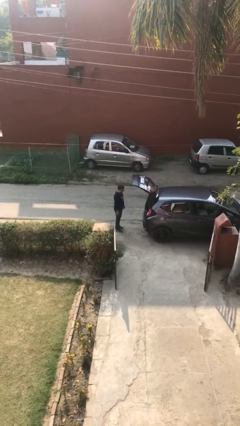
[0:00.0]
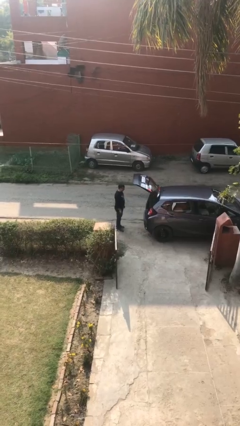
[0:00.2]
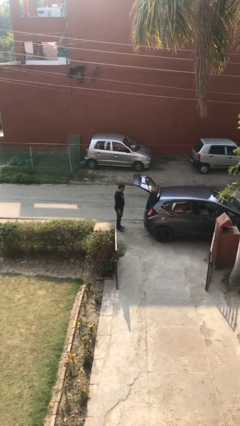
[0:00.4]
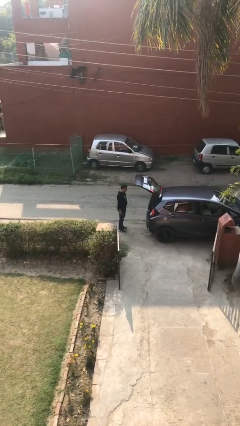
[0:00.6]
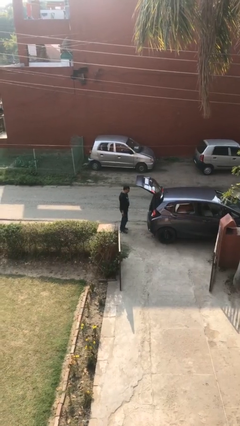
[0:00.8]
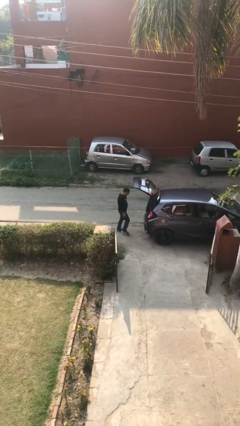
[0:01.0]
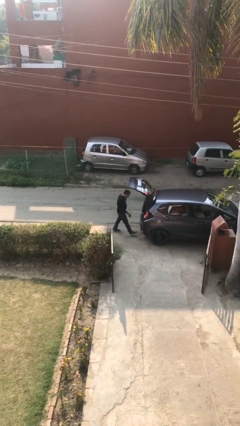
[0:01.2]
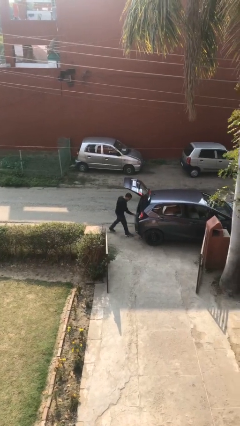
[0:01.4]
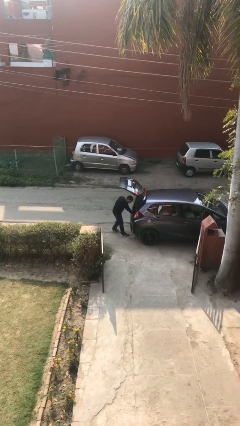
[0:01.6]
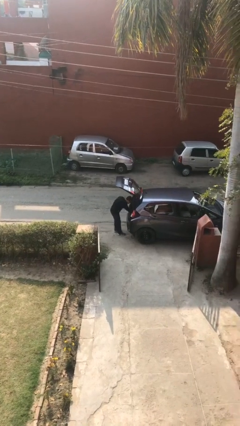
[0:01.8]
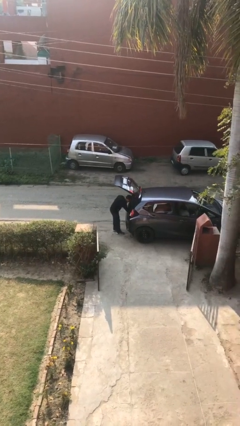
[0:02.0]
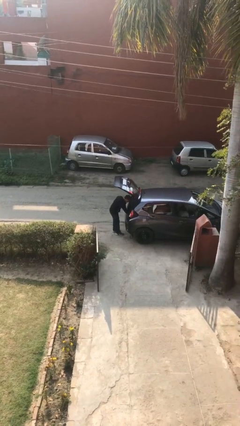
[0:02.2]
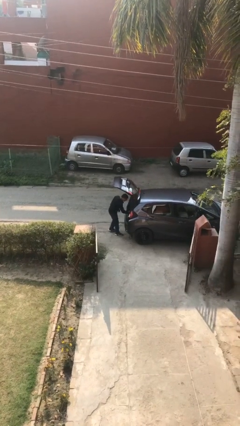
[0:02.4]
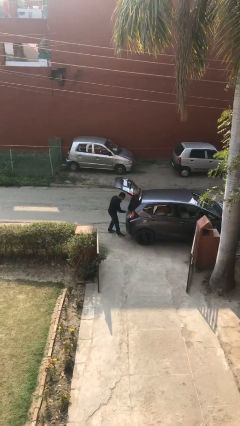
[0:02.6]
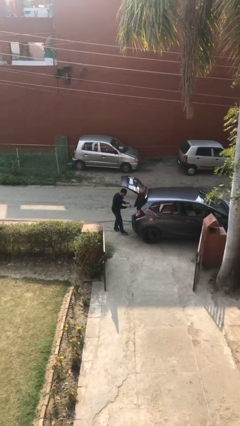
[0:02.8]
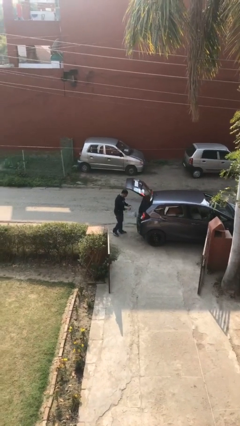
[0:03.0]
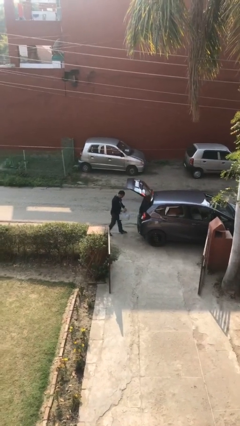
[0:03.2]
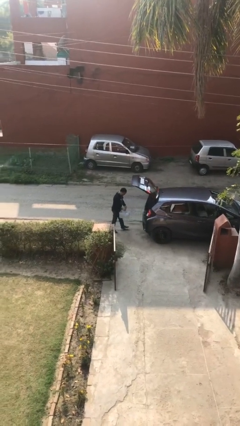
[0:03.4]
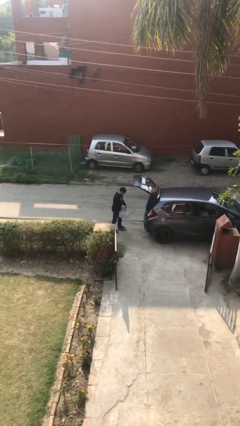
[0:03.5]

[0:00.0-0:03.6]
person unloads car

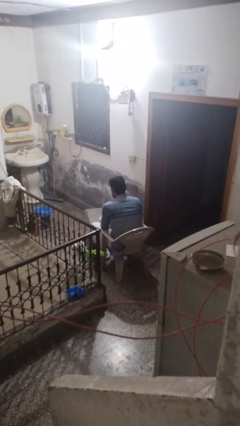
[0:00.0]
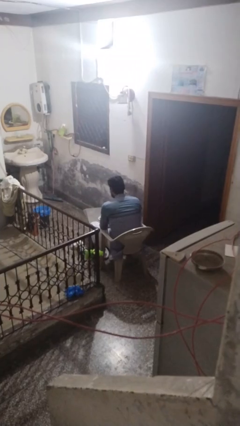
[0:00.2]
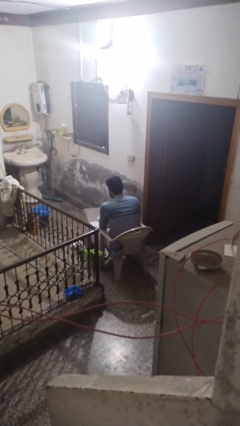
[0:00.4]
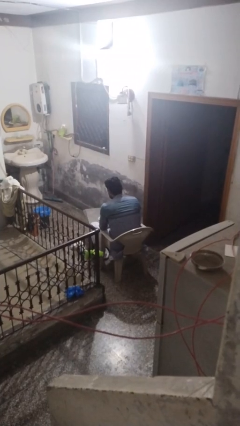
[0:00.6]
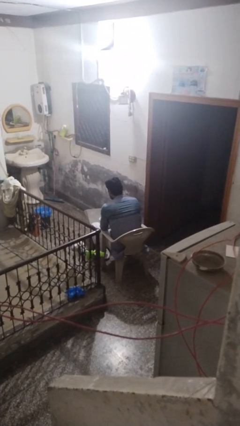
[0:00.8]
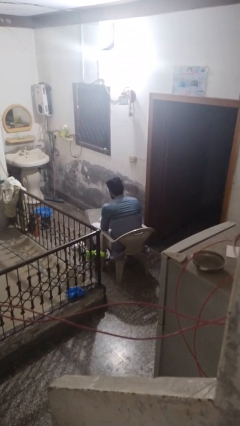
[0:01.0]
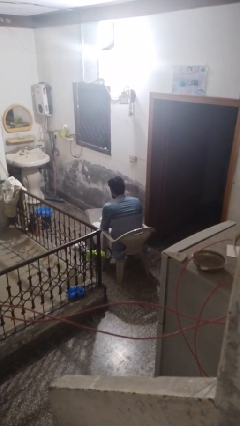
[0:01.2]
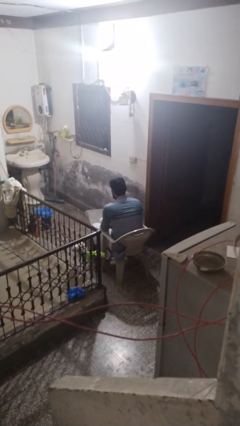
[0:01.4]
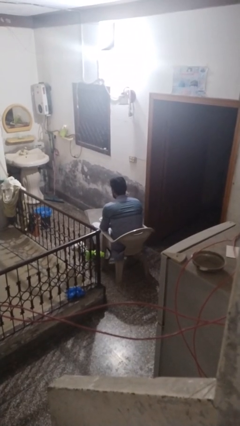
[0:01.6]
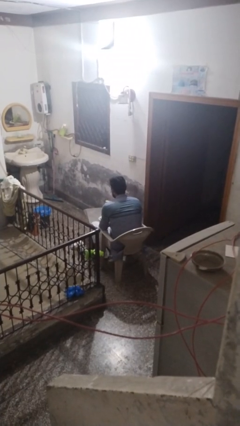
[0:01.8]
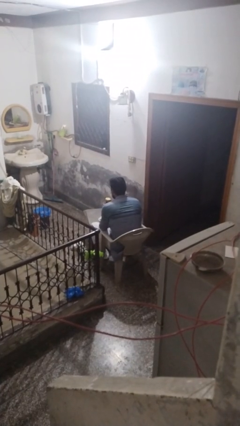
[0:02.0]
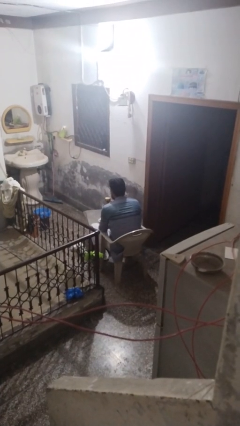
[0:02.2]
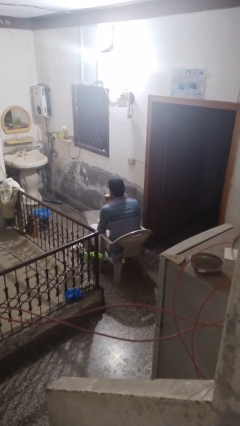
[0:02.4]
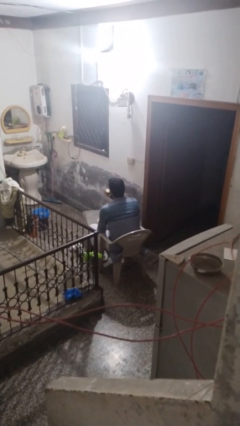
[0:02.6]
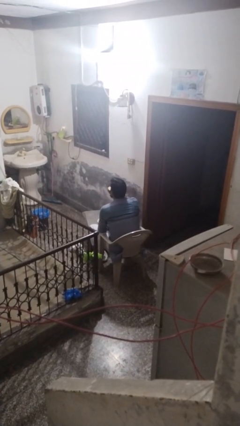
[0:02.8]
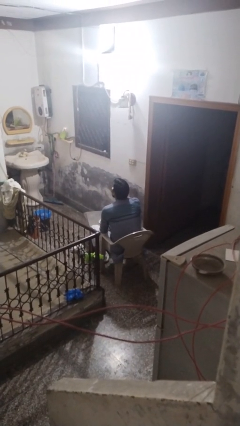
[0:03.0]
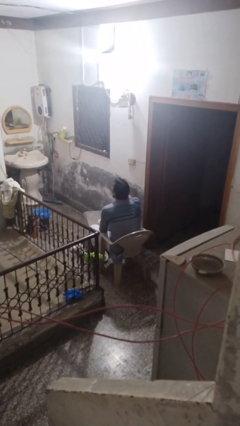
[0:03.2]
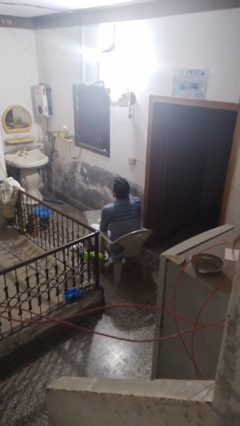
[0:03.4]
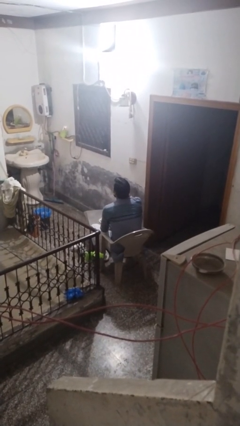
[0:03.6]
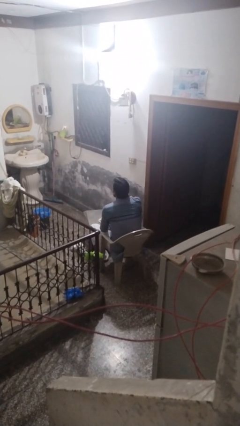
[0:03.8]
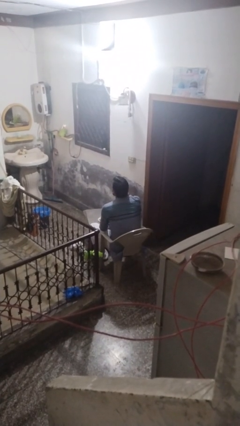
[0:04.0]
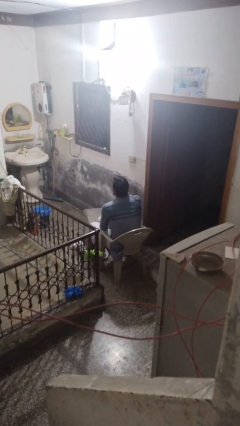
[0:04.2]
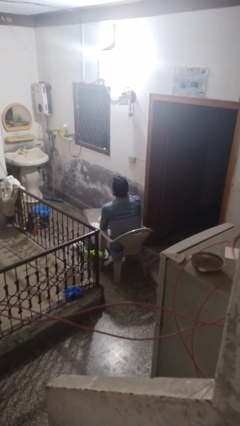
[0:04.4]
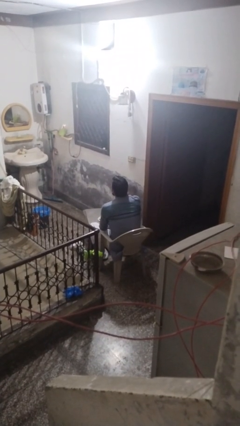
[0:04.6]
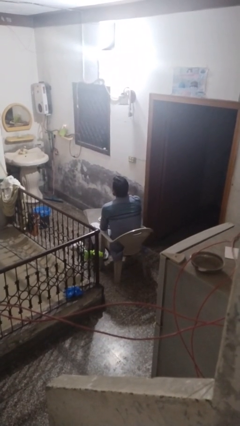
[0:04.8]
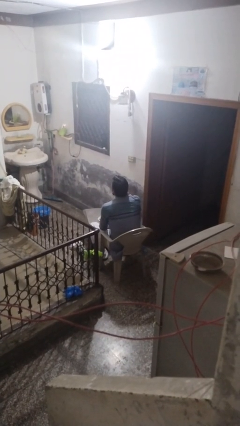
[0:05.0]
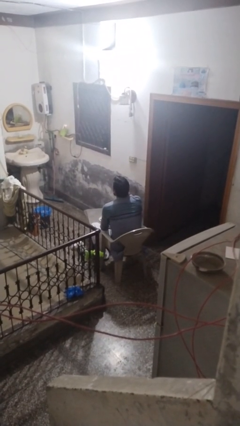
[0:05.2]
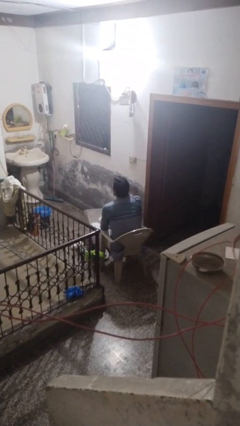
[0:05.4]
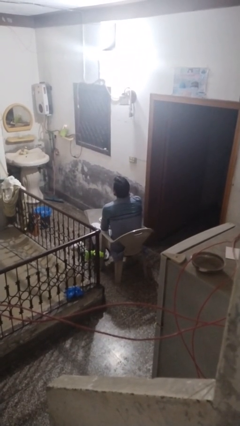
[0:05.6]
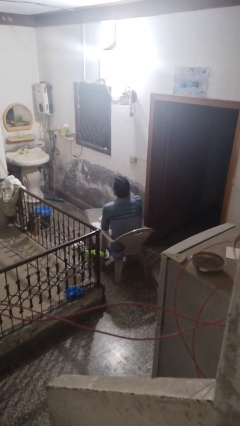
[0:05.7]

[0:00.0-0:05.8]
person eats with hands

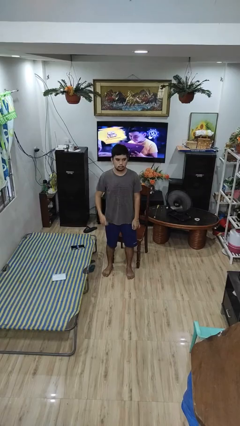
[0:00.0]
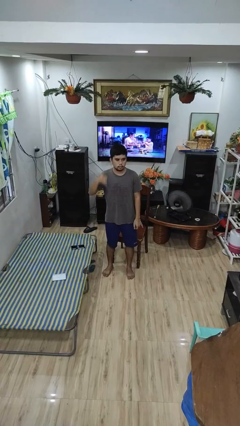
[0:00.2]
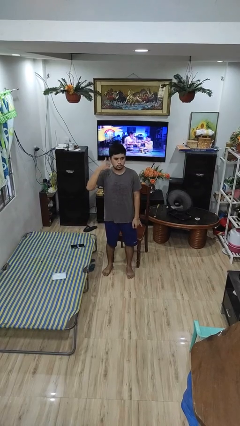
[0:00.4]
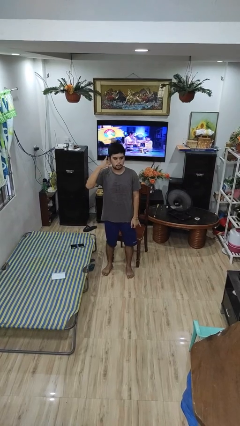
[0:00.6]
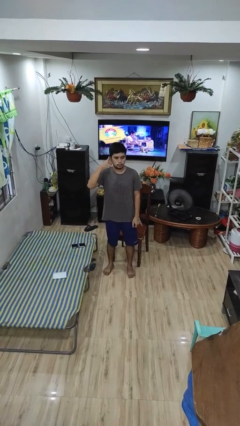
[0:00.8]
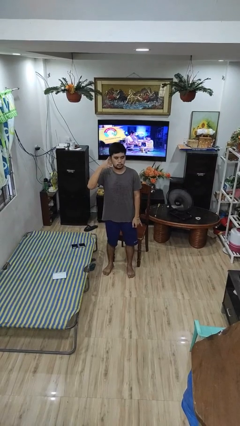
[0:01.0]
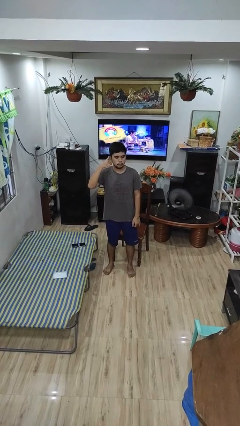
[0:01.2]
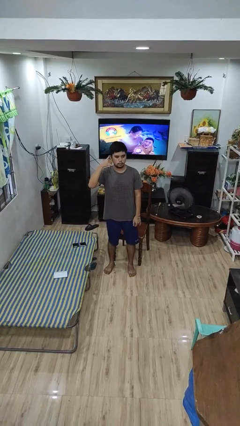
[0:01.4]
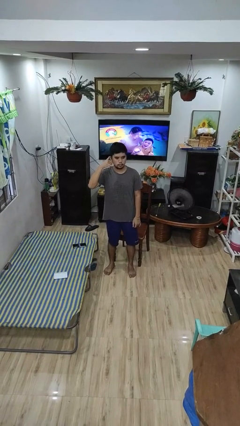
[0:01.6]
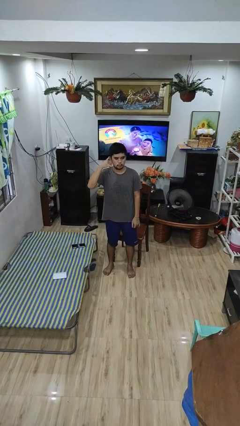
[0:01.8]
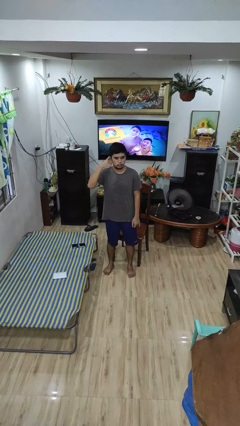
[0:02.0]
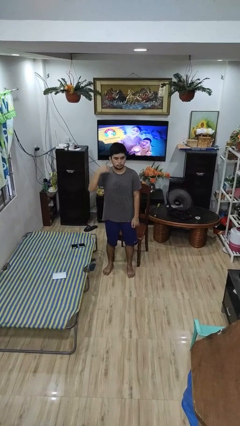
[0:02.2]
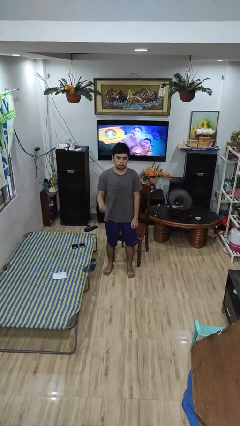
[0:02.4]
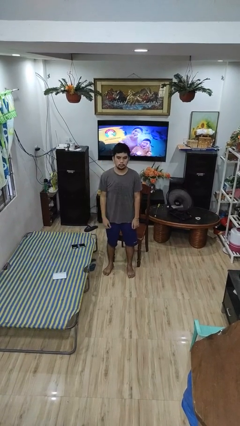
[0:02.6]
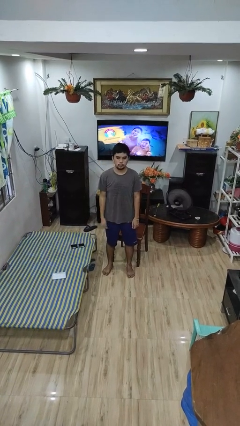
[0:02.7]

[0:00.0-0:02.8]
person gestures call me

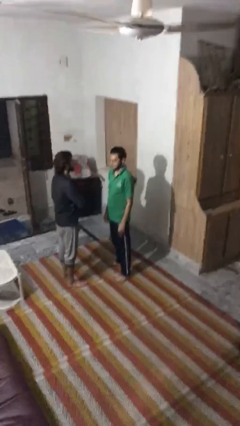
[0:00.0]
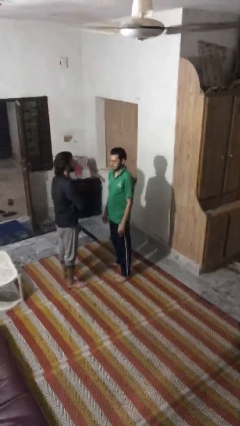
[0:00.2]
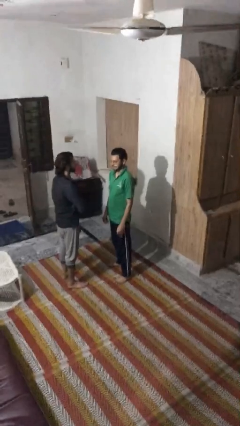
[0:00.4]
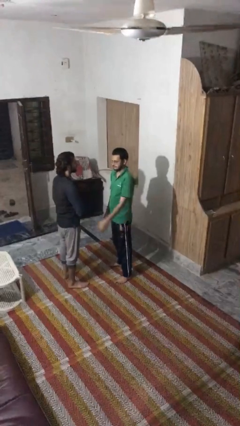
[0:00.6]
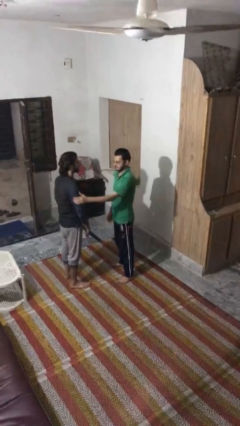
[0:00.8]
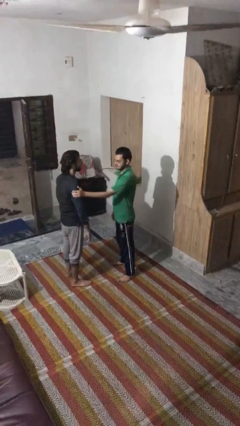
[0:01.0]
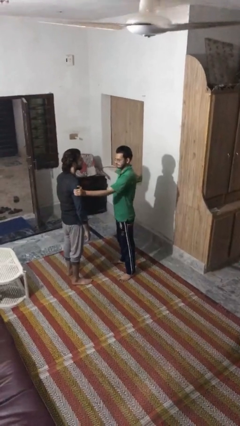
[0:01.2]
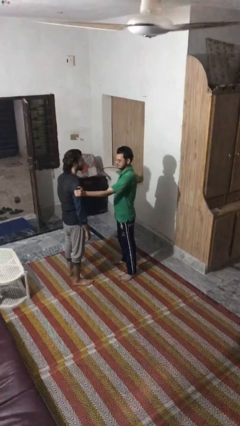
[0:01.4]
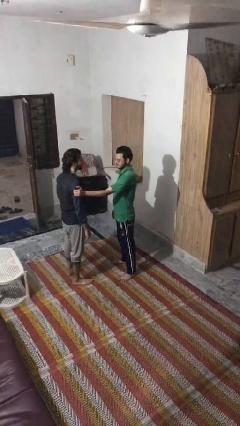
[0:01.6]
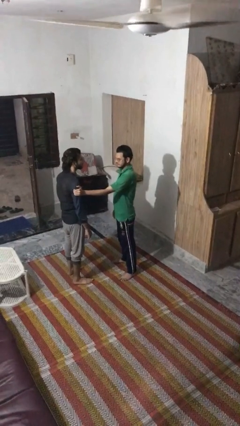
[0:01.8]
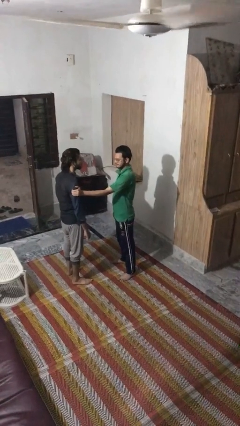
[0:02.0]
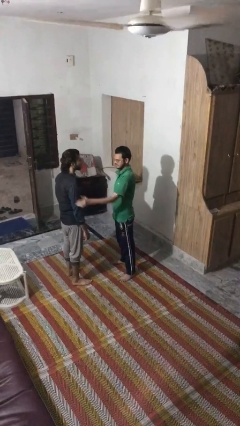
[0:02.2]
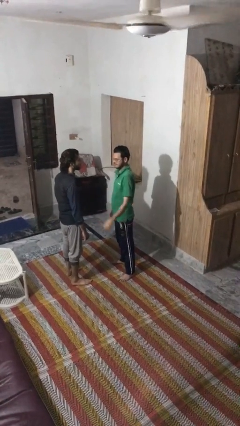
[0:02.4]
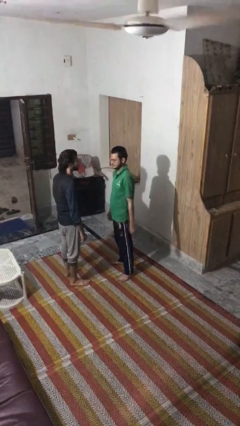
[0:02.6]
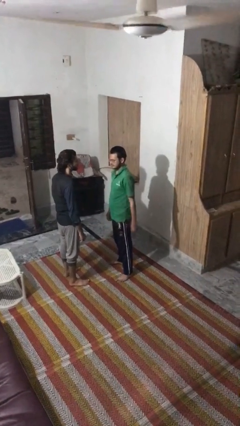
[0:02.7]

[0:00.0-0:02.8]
person grabs person by bicep

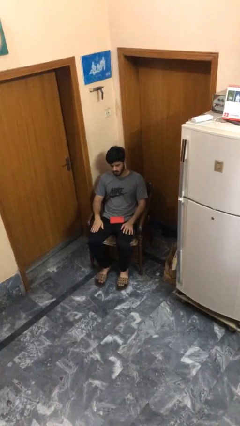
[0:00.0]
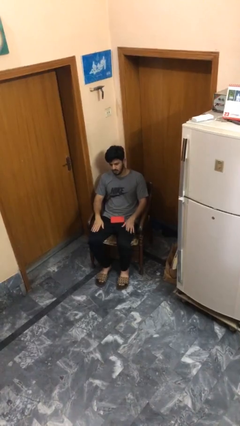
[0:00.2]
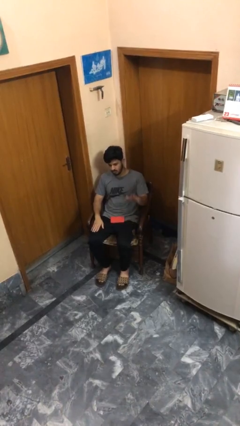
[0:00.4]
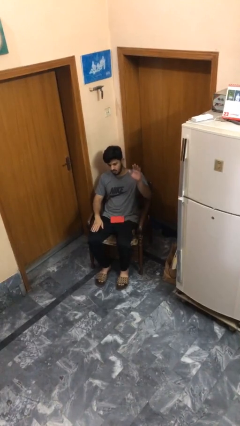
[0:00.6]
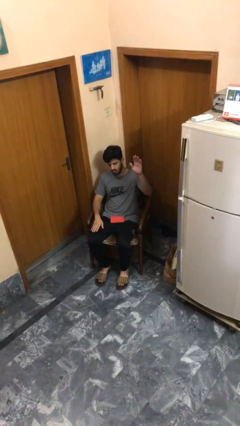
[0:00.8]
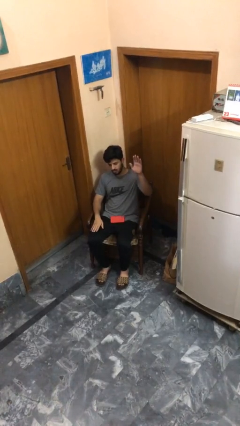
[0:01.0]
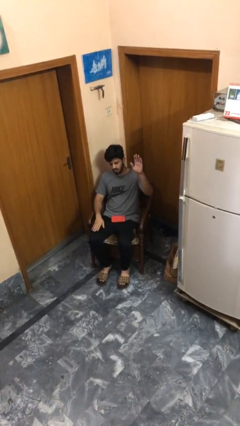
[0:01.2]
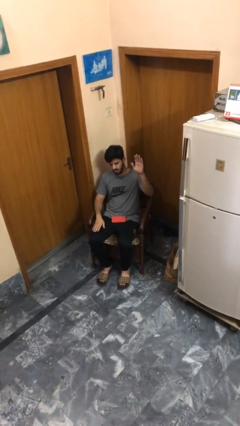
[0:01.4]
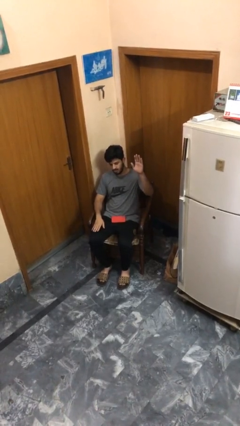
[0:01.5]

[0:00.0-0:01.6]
person gestures raise hand

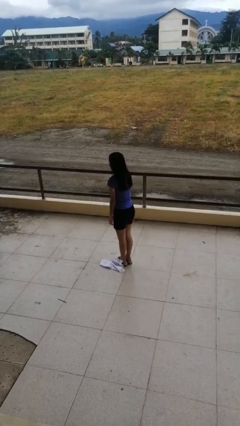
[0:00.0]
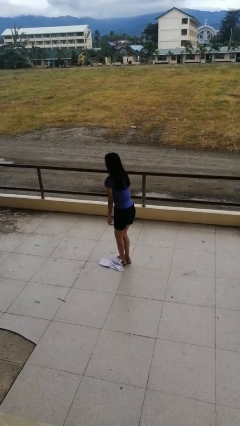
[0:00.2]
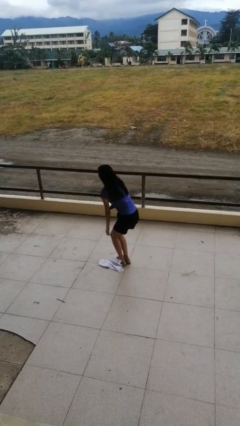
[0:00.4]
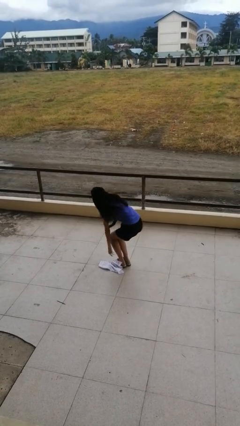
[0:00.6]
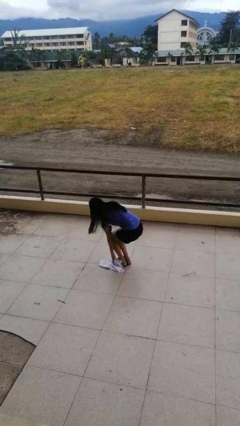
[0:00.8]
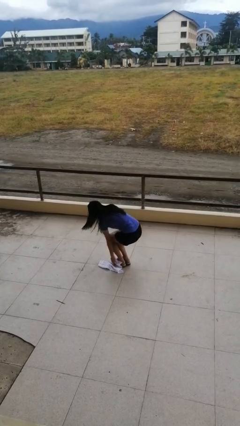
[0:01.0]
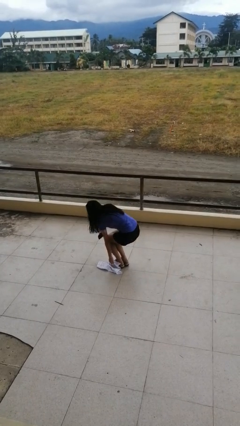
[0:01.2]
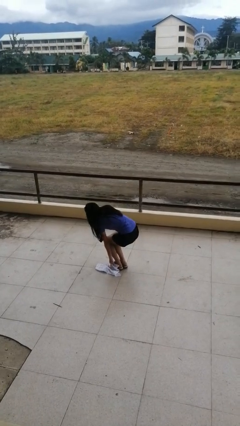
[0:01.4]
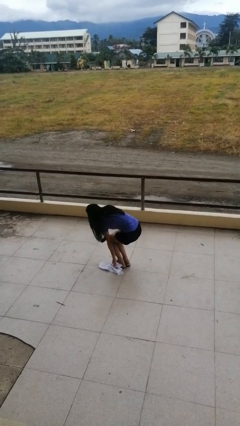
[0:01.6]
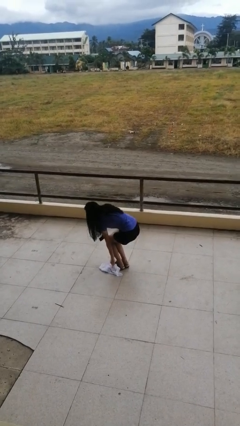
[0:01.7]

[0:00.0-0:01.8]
person picks up object from floor
